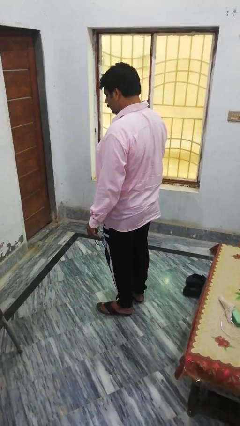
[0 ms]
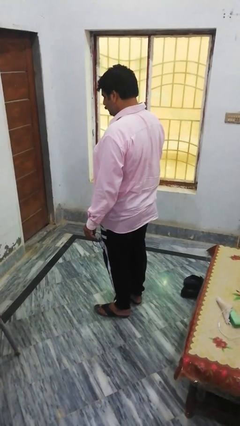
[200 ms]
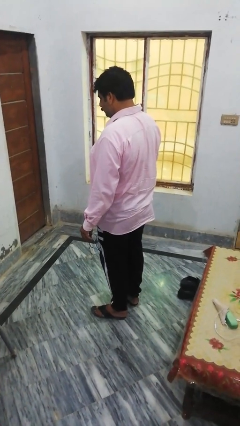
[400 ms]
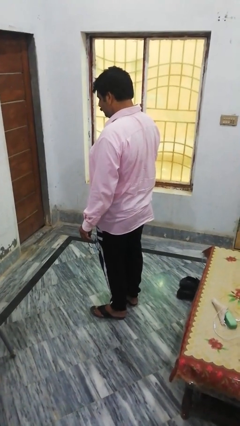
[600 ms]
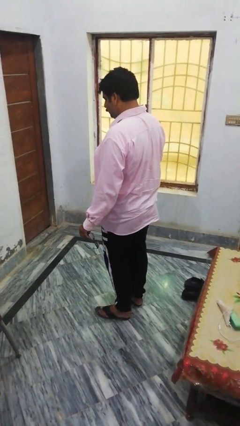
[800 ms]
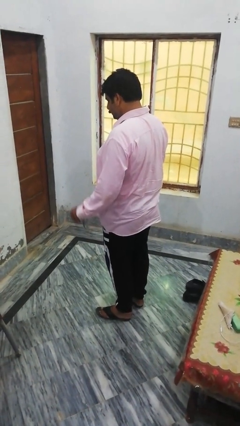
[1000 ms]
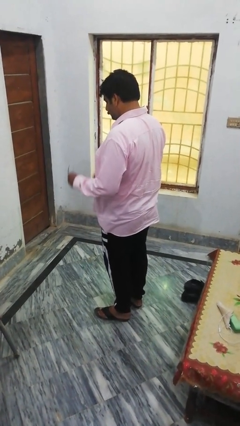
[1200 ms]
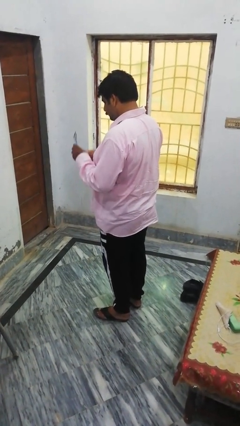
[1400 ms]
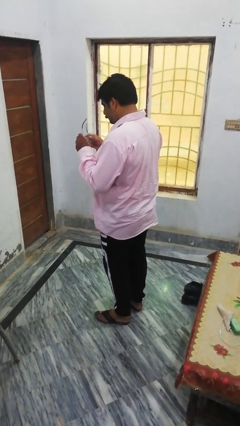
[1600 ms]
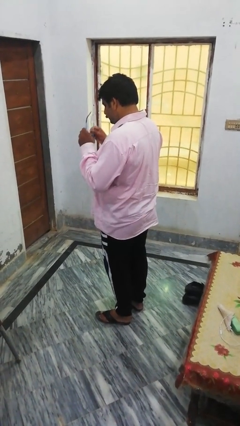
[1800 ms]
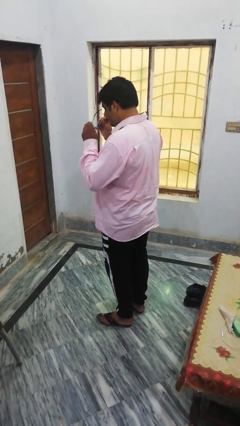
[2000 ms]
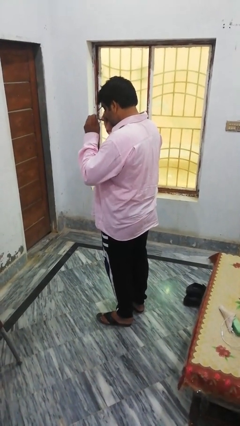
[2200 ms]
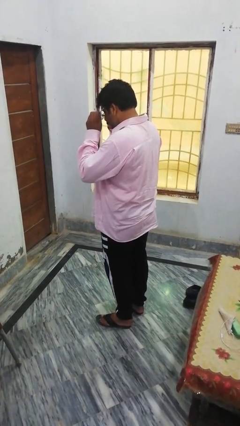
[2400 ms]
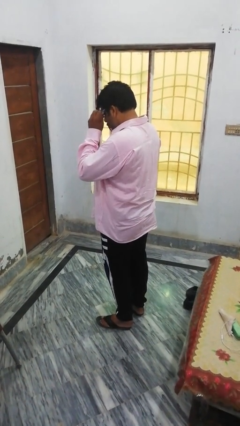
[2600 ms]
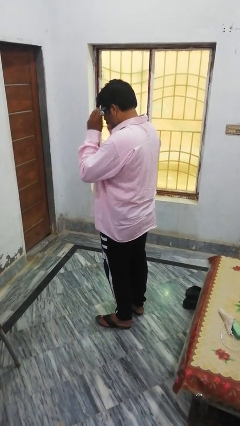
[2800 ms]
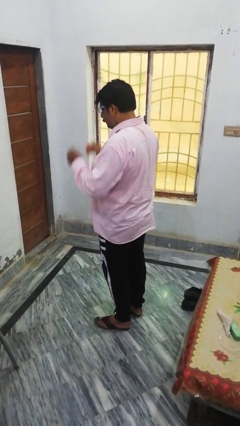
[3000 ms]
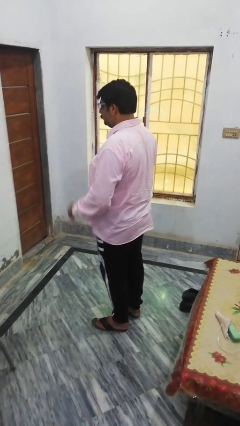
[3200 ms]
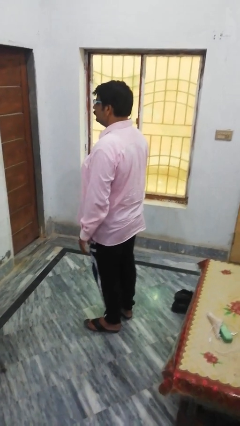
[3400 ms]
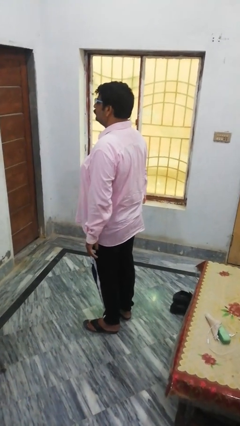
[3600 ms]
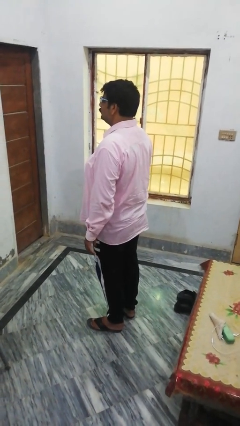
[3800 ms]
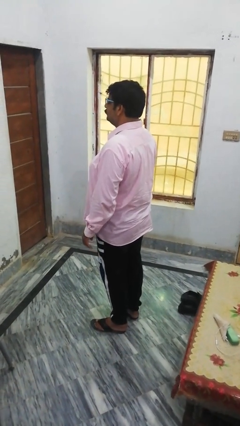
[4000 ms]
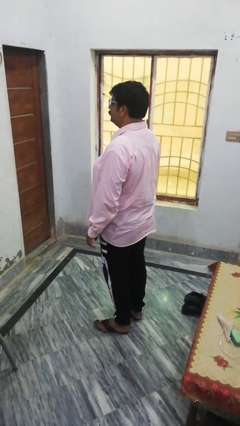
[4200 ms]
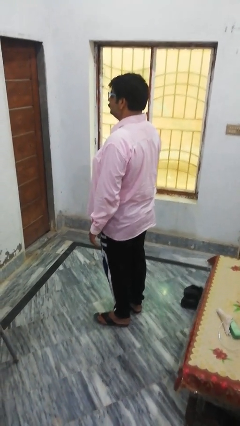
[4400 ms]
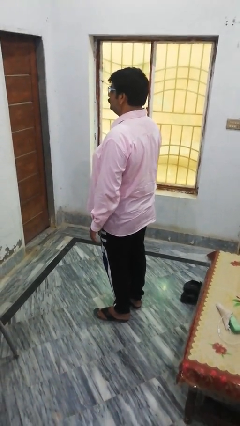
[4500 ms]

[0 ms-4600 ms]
person puts on glasses

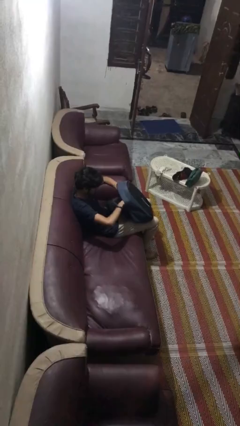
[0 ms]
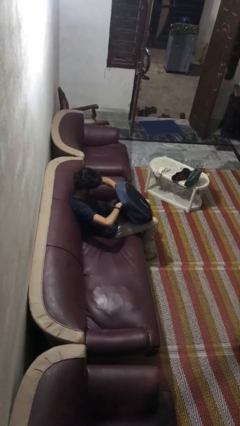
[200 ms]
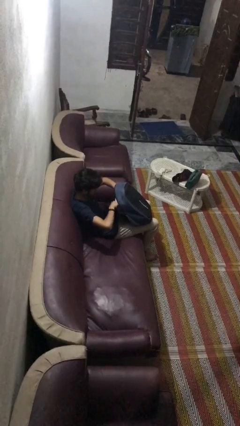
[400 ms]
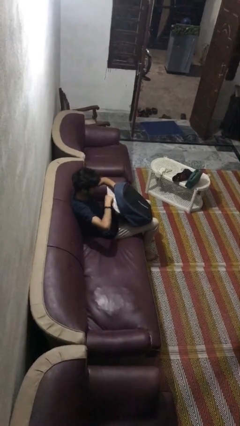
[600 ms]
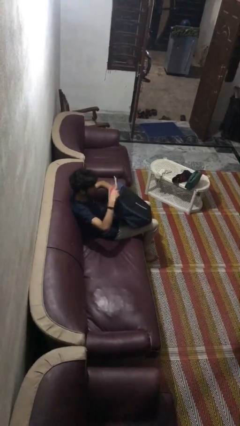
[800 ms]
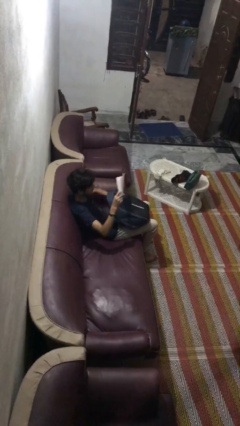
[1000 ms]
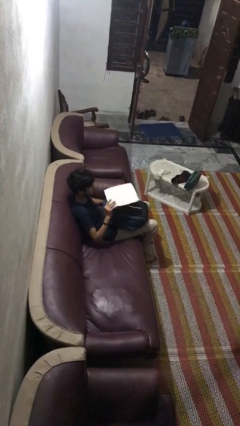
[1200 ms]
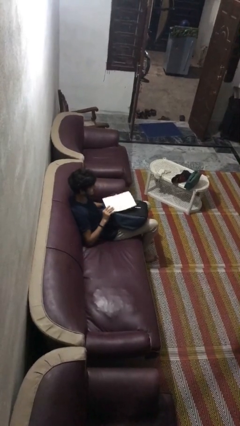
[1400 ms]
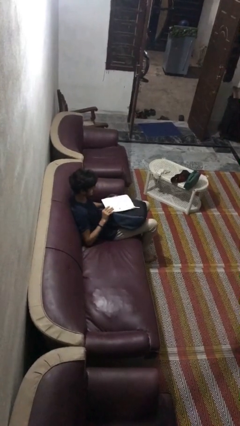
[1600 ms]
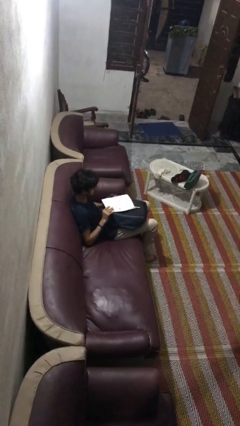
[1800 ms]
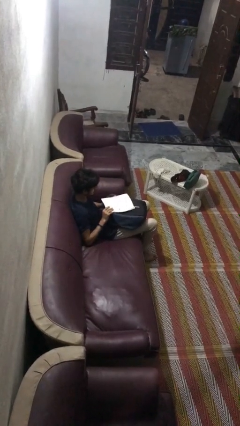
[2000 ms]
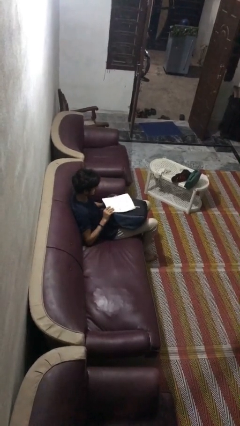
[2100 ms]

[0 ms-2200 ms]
person takes object from backpack

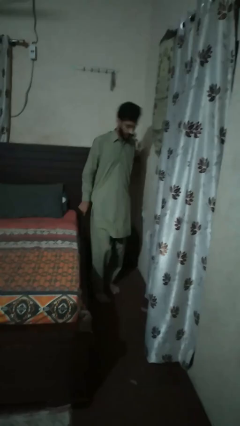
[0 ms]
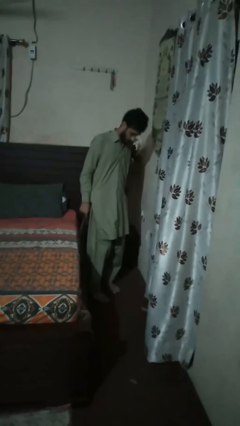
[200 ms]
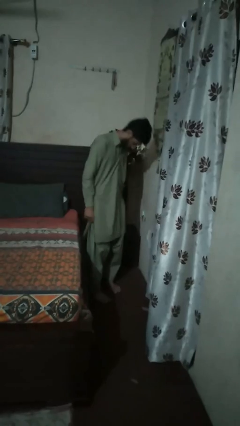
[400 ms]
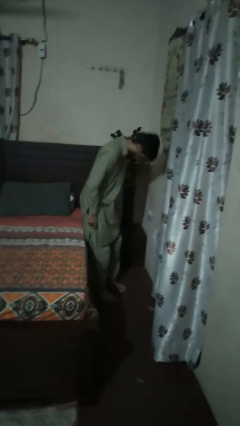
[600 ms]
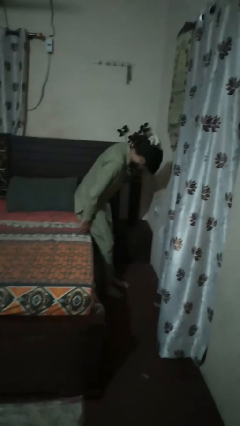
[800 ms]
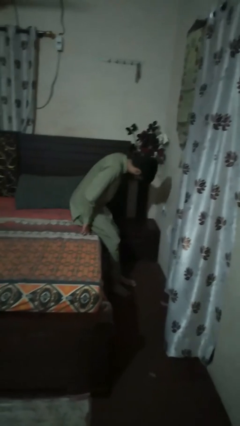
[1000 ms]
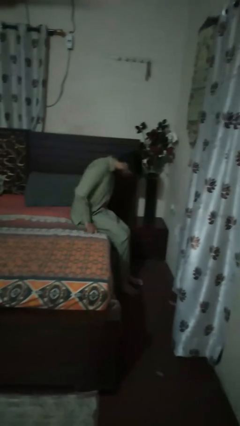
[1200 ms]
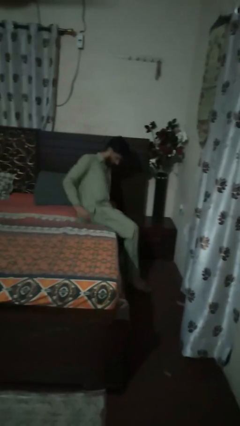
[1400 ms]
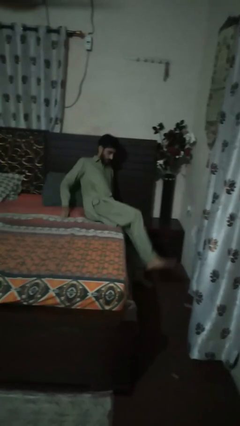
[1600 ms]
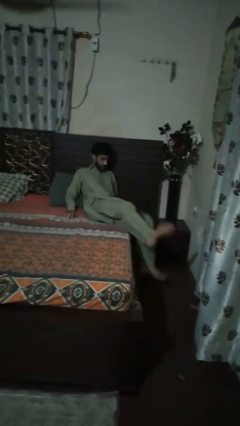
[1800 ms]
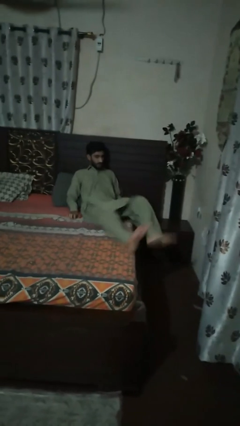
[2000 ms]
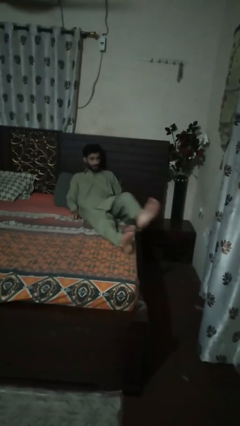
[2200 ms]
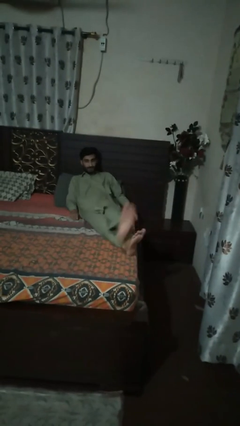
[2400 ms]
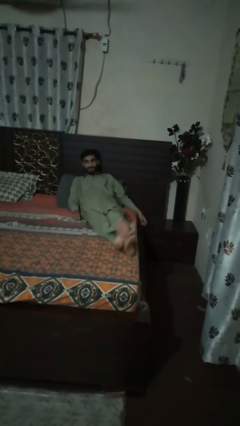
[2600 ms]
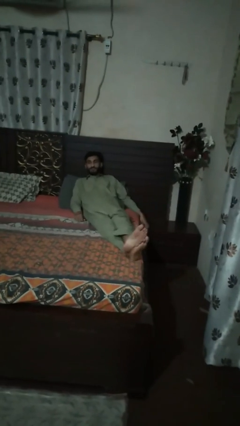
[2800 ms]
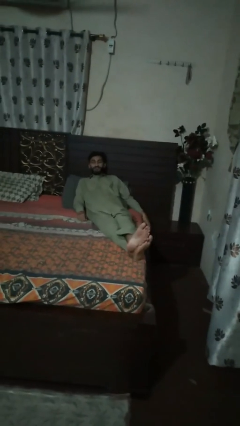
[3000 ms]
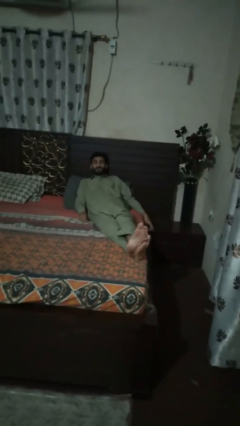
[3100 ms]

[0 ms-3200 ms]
person lies down on bed

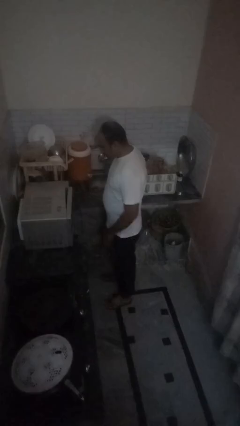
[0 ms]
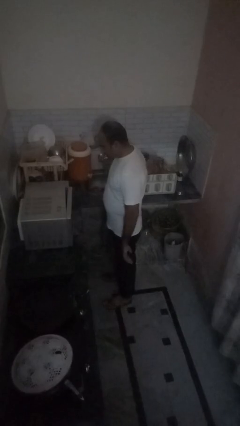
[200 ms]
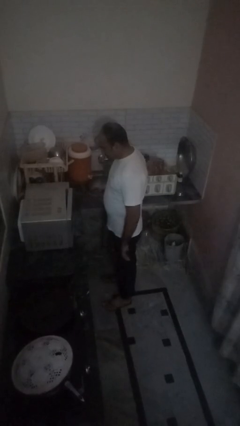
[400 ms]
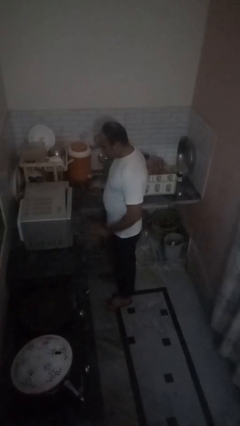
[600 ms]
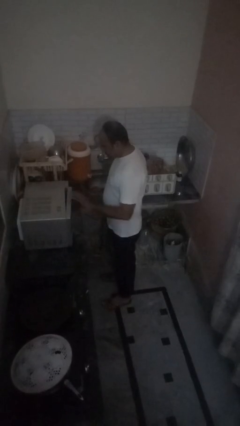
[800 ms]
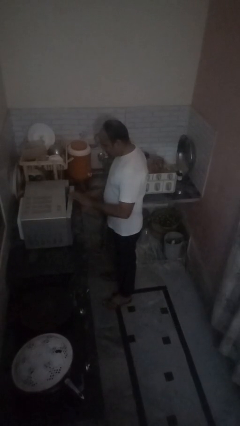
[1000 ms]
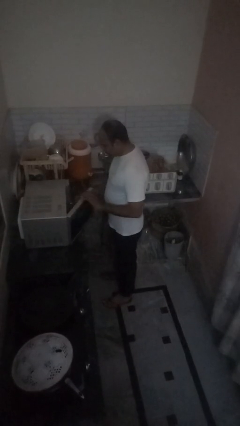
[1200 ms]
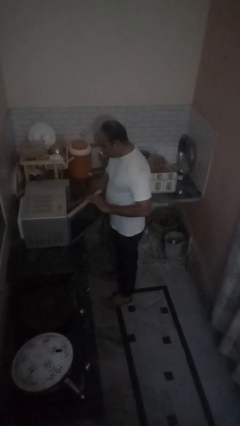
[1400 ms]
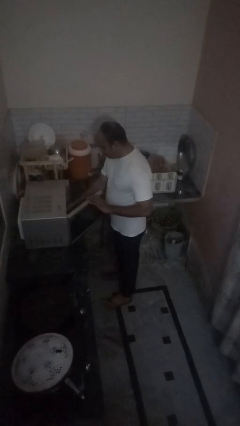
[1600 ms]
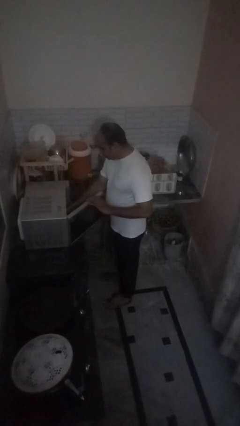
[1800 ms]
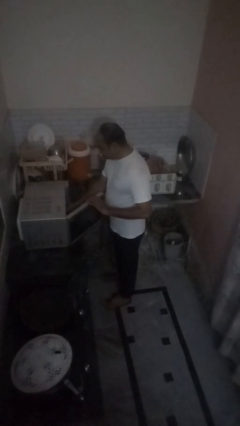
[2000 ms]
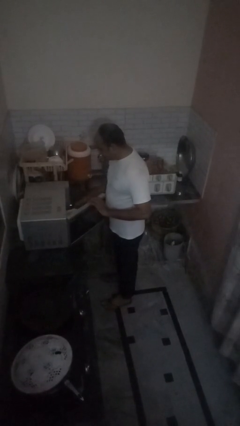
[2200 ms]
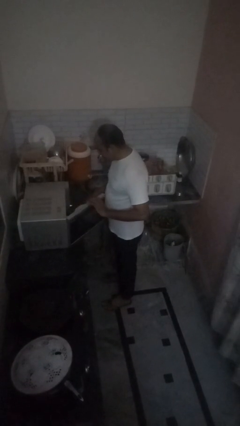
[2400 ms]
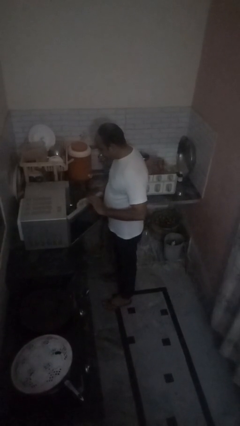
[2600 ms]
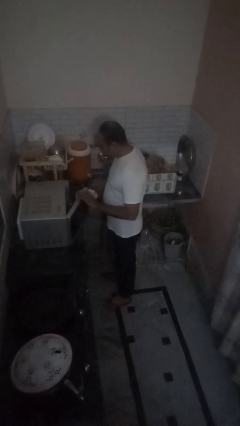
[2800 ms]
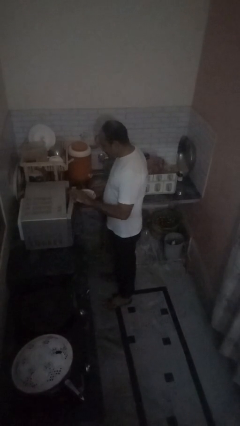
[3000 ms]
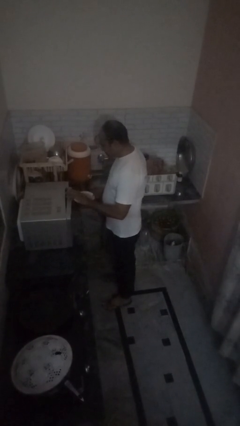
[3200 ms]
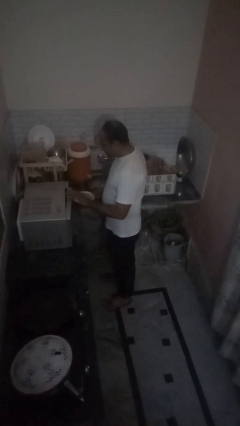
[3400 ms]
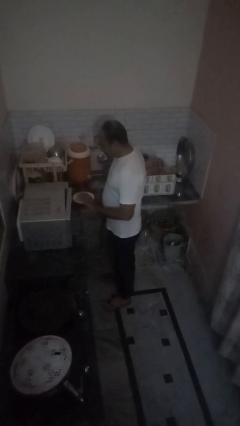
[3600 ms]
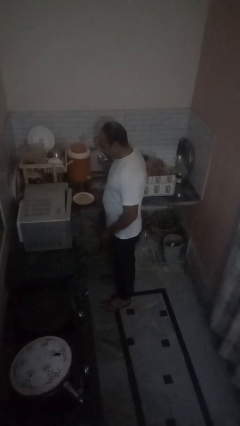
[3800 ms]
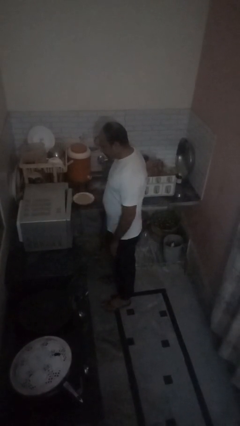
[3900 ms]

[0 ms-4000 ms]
person takes object from oven

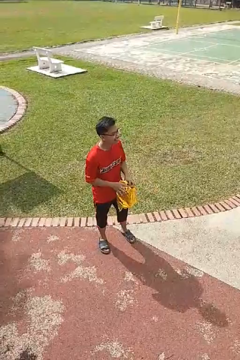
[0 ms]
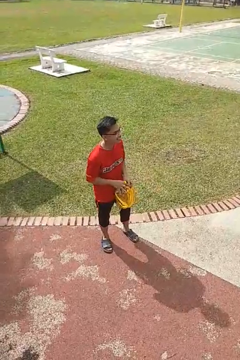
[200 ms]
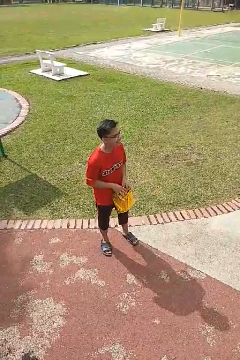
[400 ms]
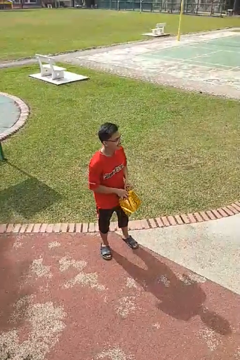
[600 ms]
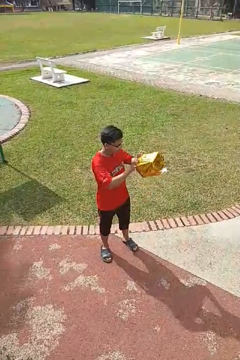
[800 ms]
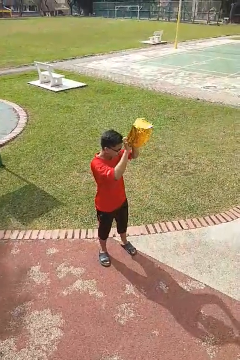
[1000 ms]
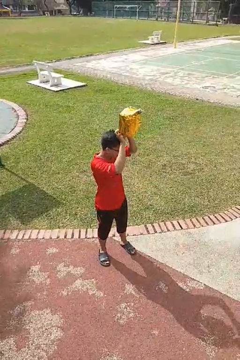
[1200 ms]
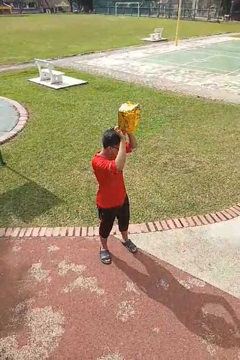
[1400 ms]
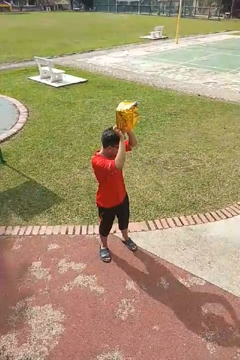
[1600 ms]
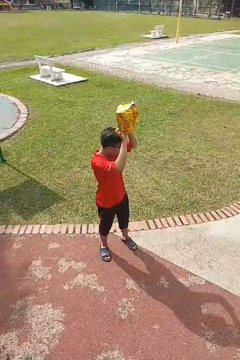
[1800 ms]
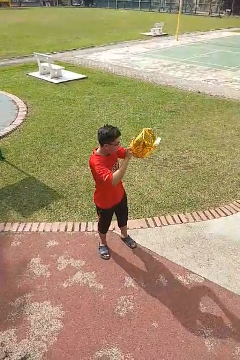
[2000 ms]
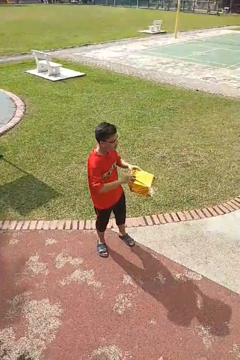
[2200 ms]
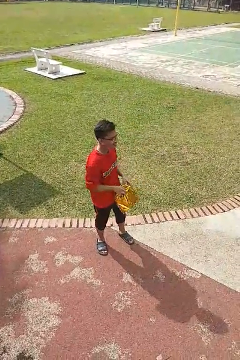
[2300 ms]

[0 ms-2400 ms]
person holds object above head

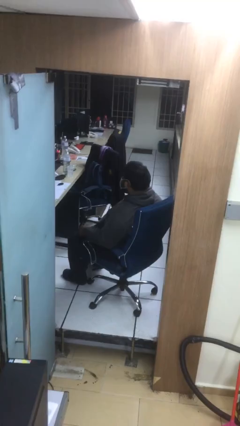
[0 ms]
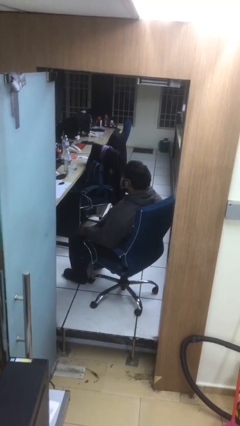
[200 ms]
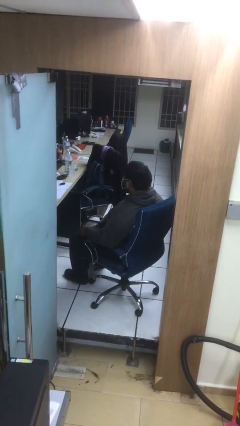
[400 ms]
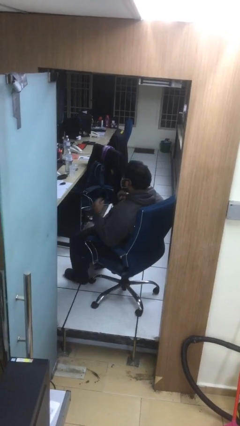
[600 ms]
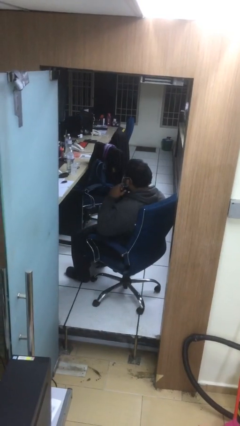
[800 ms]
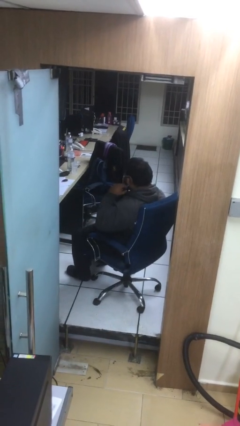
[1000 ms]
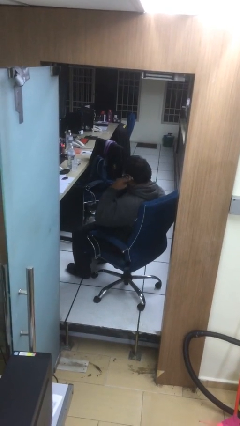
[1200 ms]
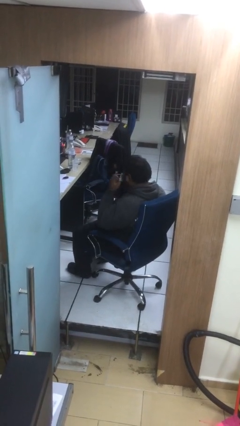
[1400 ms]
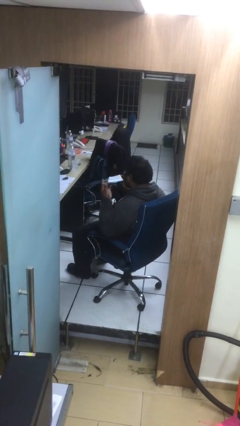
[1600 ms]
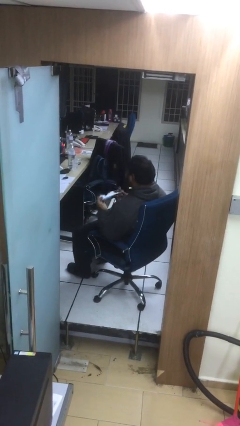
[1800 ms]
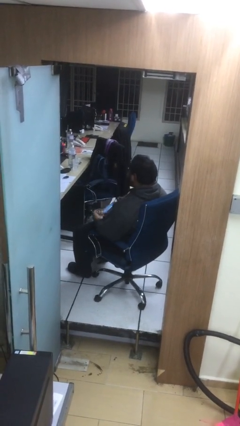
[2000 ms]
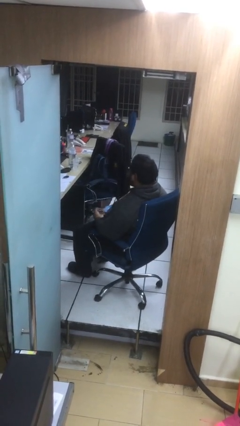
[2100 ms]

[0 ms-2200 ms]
person takes off facemask
